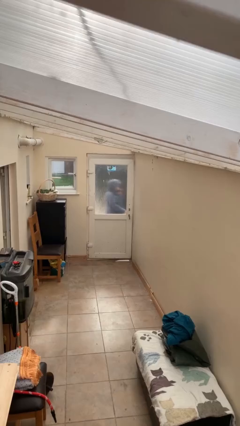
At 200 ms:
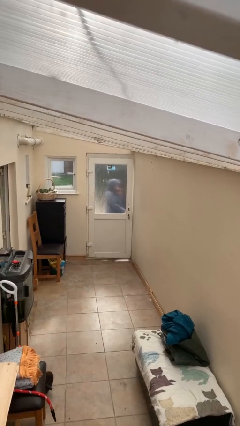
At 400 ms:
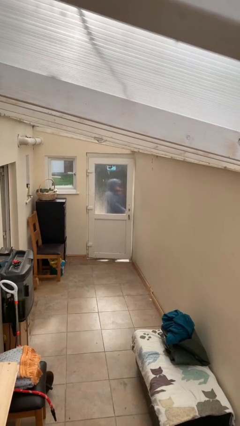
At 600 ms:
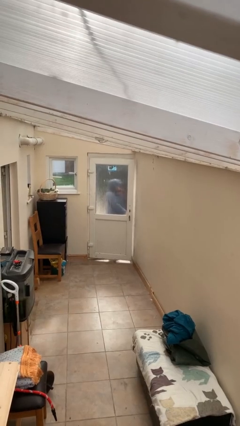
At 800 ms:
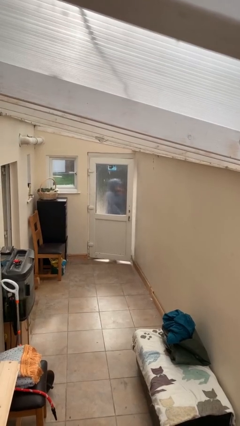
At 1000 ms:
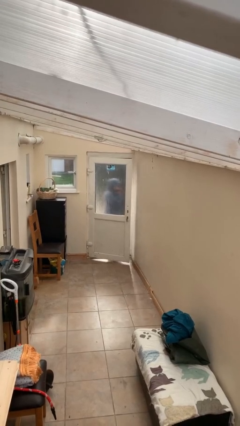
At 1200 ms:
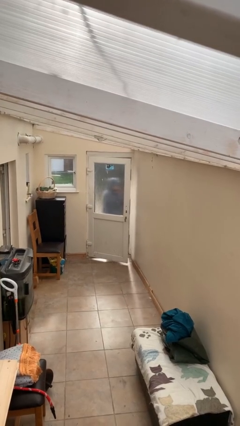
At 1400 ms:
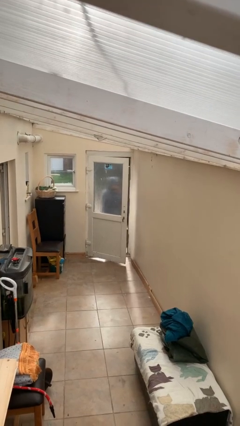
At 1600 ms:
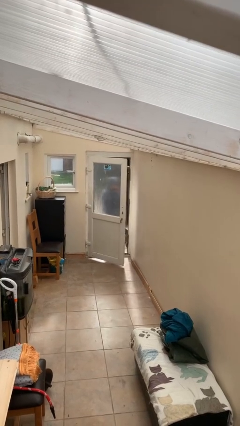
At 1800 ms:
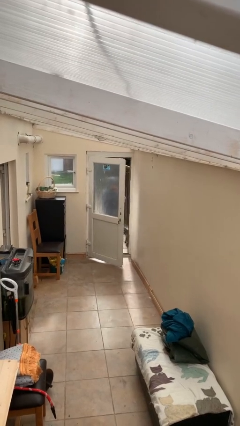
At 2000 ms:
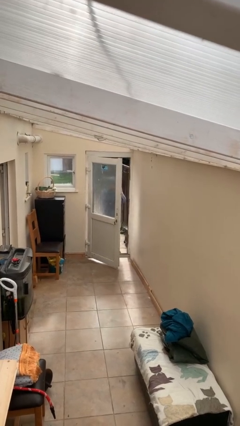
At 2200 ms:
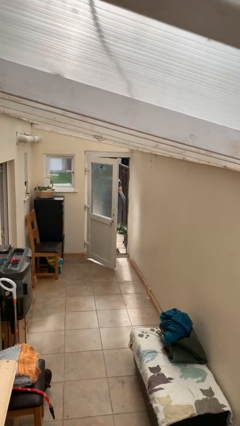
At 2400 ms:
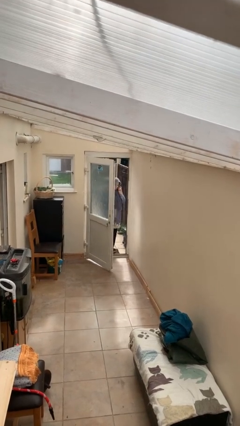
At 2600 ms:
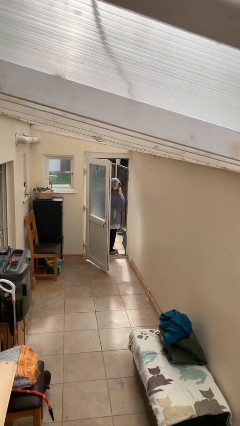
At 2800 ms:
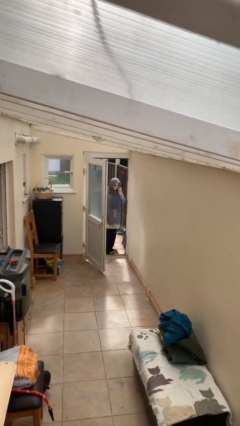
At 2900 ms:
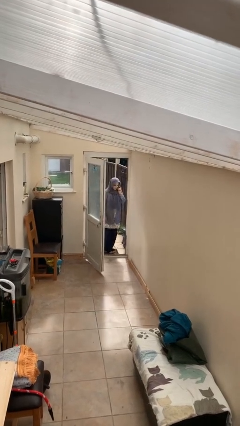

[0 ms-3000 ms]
person opens facility door

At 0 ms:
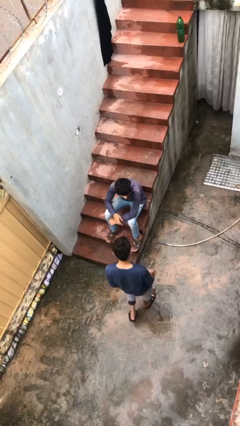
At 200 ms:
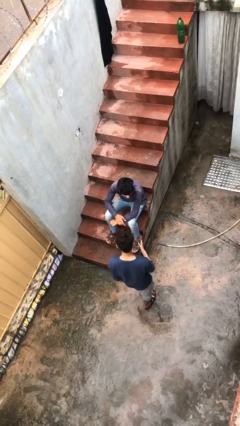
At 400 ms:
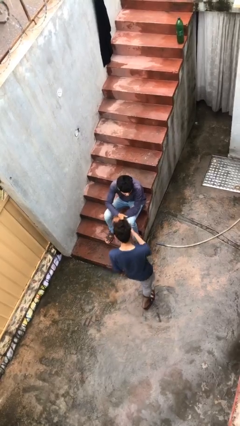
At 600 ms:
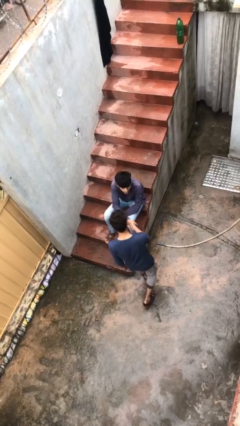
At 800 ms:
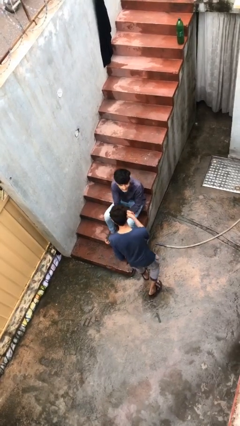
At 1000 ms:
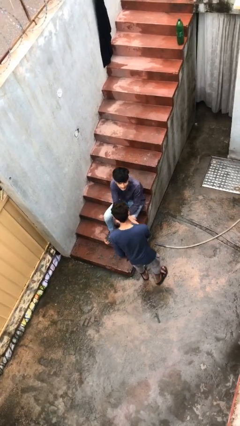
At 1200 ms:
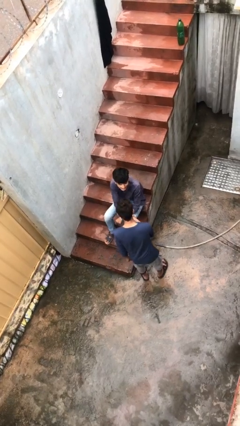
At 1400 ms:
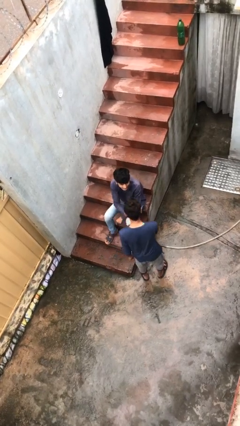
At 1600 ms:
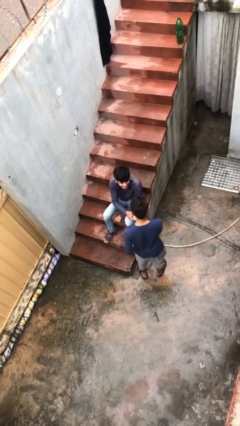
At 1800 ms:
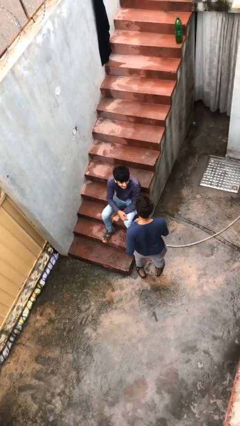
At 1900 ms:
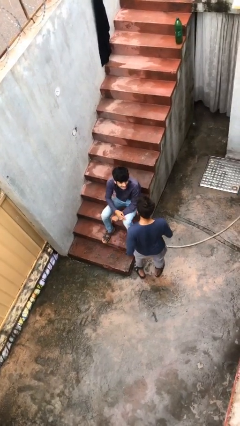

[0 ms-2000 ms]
person shakes hand

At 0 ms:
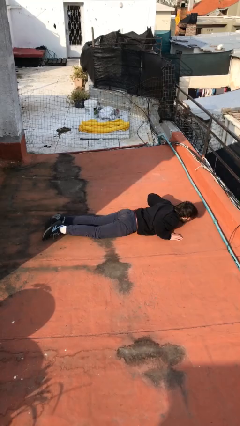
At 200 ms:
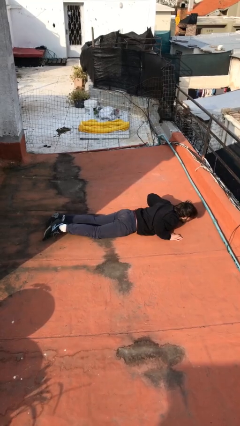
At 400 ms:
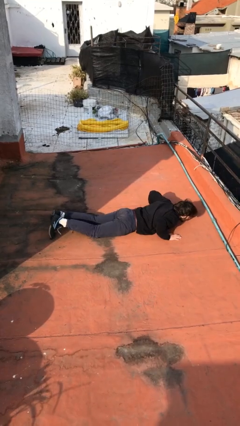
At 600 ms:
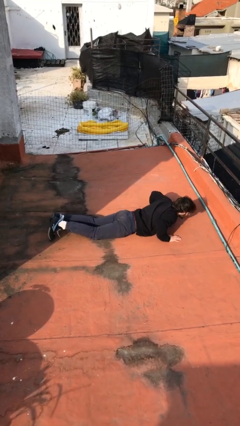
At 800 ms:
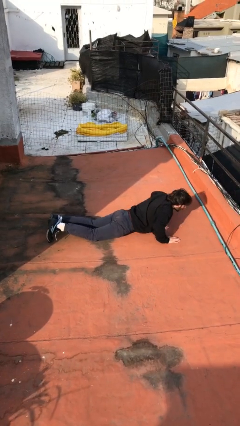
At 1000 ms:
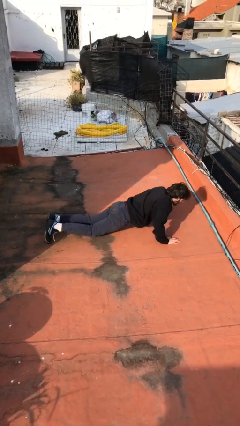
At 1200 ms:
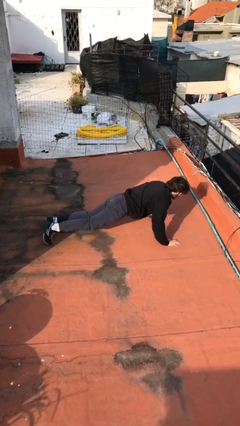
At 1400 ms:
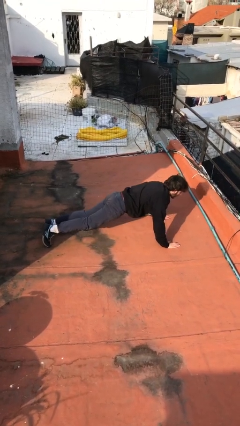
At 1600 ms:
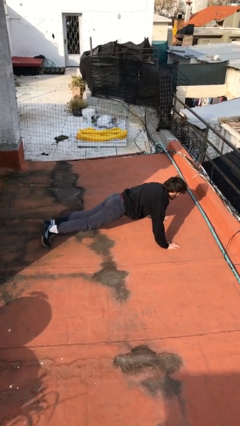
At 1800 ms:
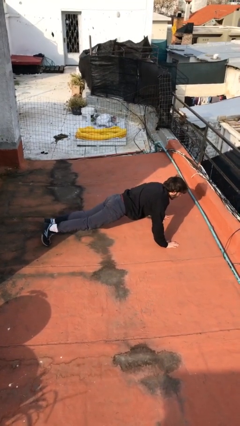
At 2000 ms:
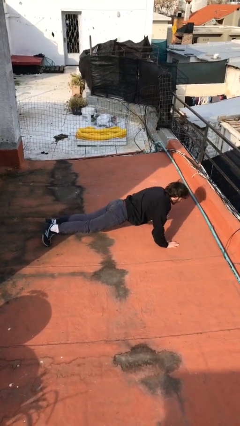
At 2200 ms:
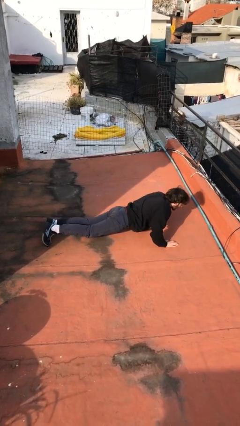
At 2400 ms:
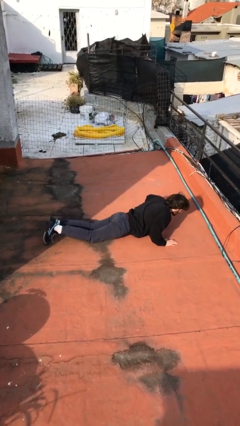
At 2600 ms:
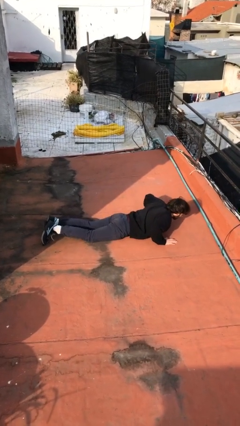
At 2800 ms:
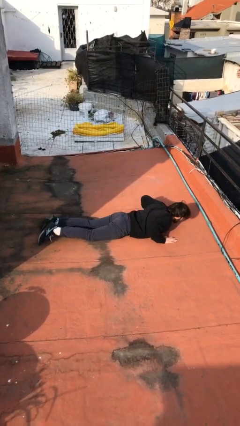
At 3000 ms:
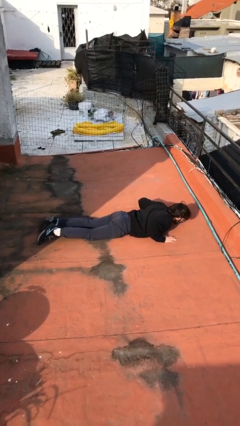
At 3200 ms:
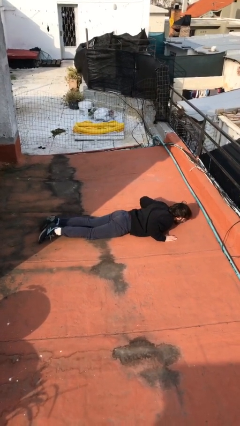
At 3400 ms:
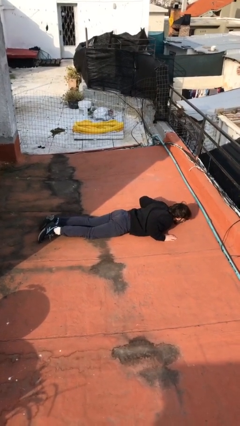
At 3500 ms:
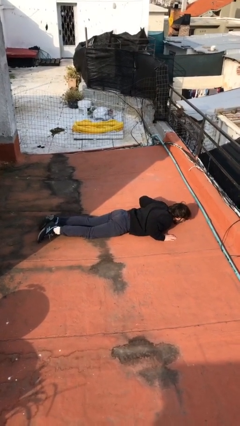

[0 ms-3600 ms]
person exercises with pushup

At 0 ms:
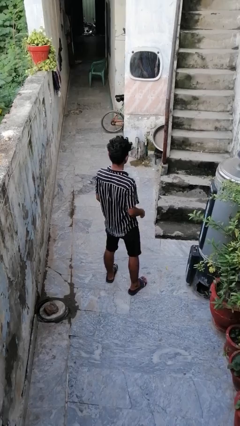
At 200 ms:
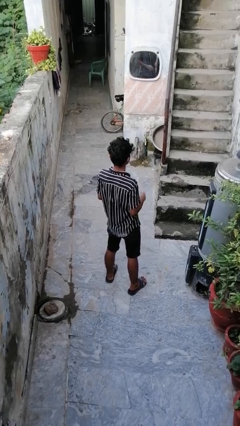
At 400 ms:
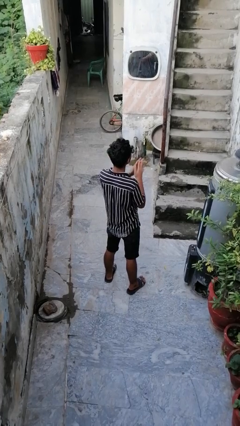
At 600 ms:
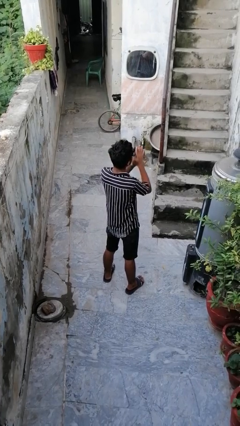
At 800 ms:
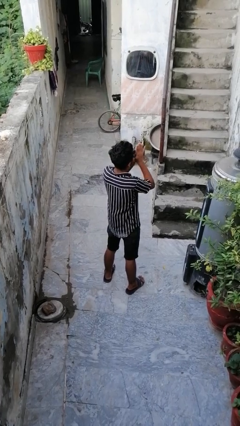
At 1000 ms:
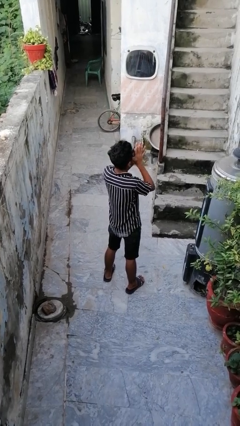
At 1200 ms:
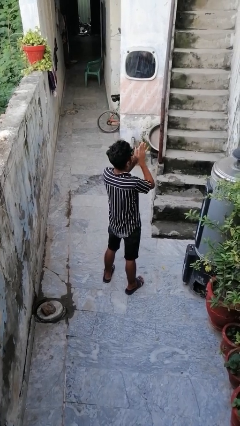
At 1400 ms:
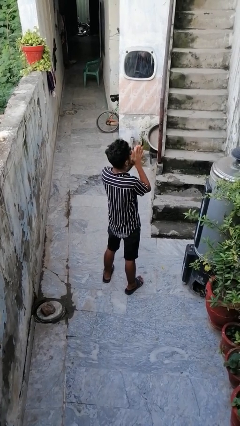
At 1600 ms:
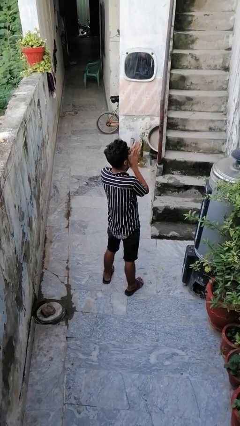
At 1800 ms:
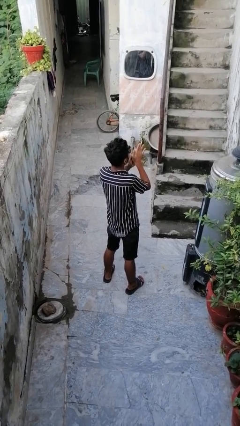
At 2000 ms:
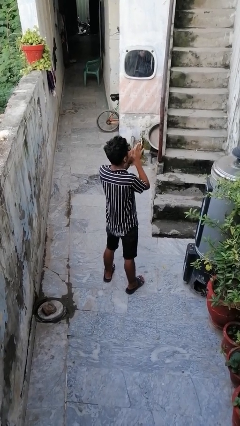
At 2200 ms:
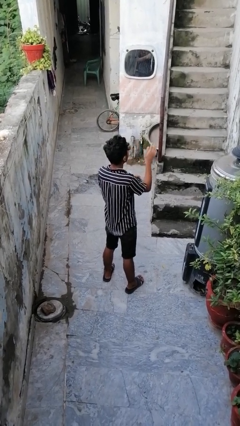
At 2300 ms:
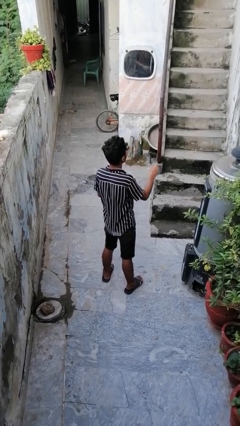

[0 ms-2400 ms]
person blows into hands

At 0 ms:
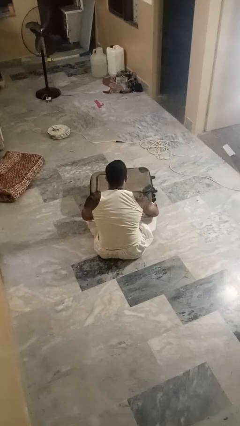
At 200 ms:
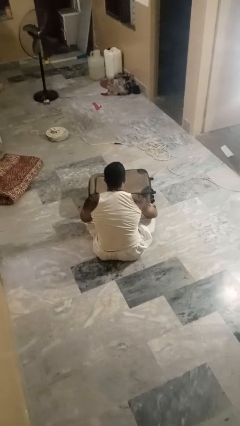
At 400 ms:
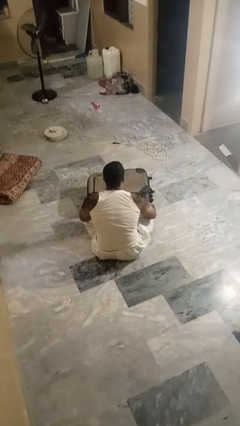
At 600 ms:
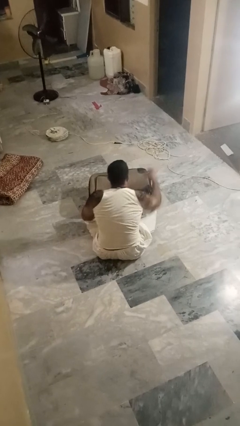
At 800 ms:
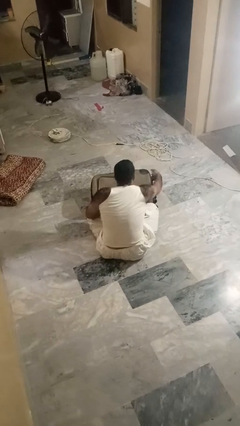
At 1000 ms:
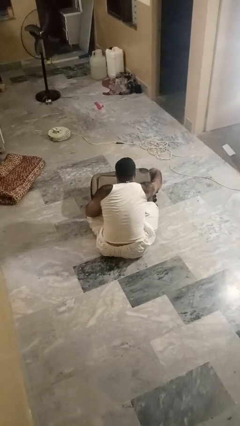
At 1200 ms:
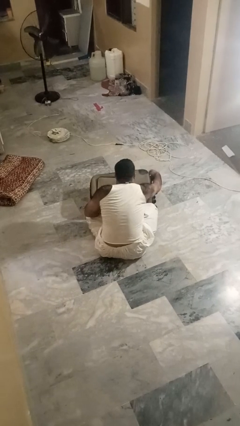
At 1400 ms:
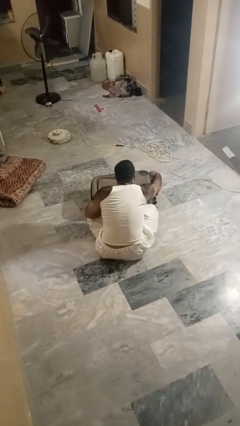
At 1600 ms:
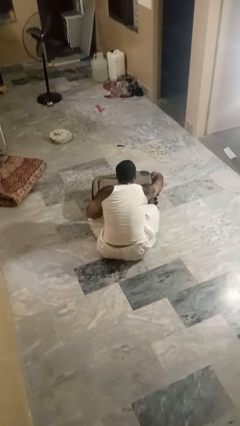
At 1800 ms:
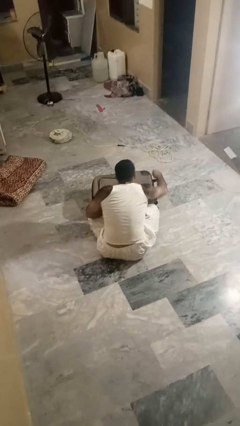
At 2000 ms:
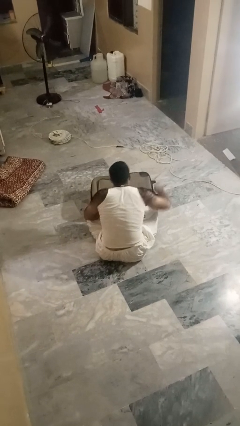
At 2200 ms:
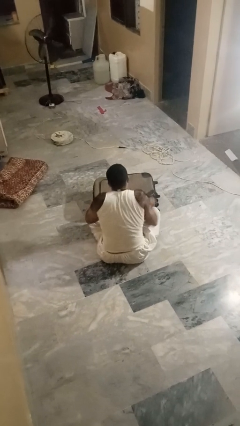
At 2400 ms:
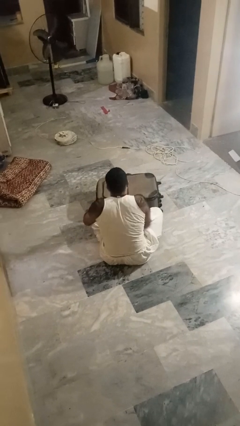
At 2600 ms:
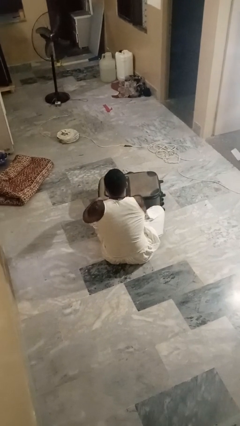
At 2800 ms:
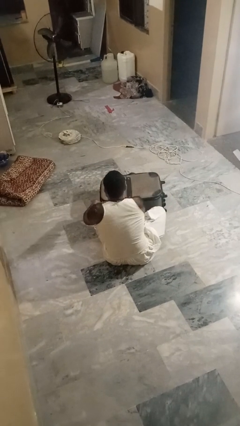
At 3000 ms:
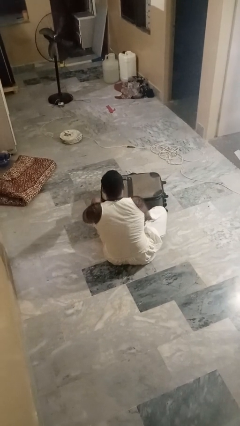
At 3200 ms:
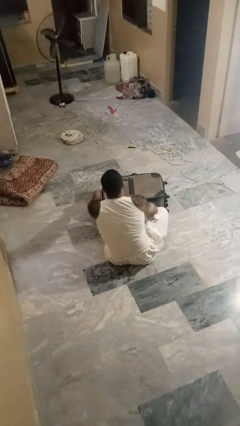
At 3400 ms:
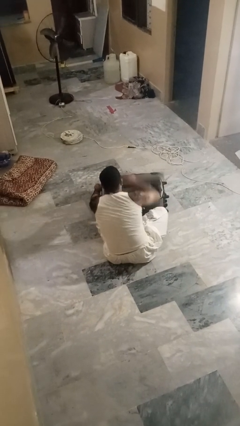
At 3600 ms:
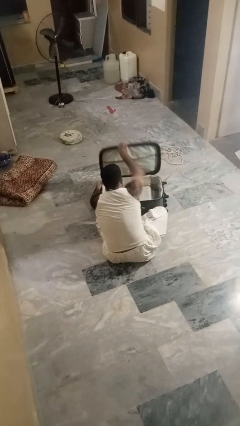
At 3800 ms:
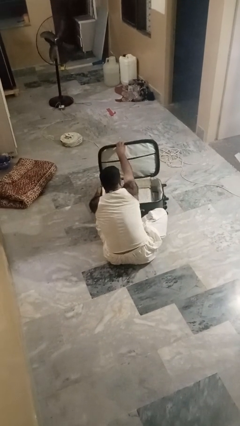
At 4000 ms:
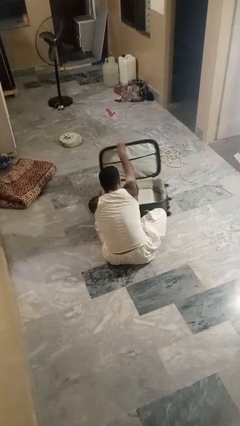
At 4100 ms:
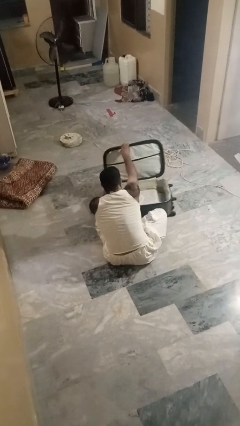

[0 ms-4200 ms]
person opens suitcase

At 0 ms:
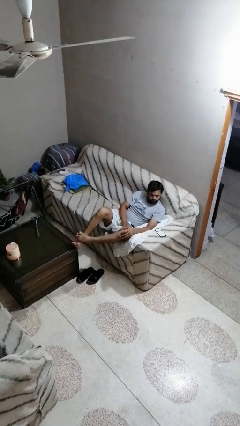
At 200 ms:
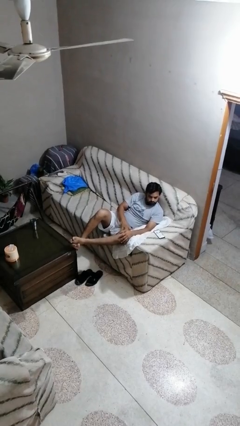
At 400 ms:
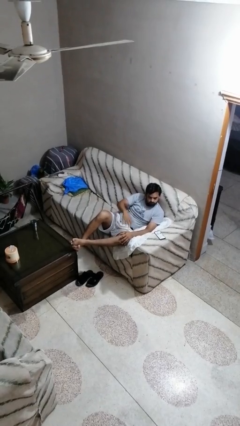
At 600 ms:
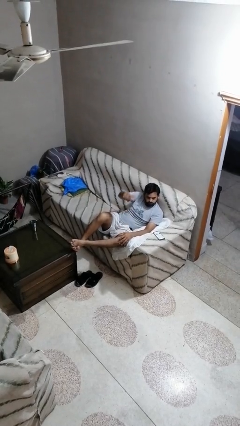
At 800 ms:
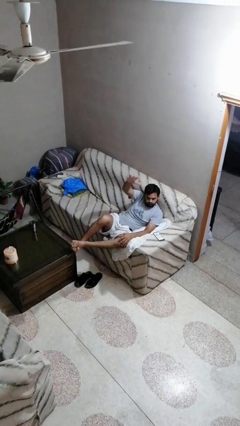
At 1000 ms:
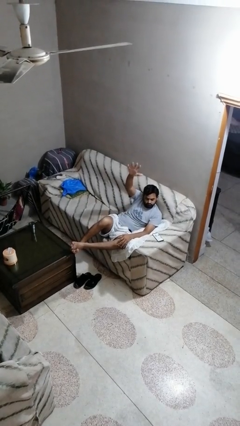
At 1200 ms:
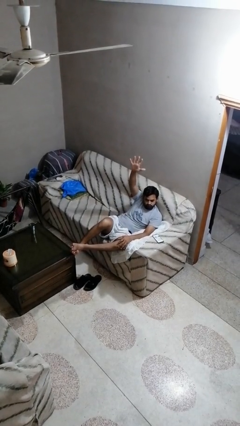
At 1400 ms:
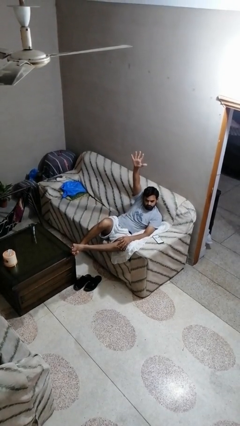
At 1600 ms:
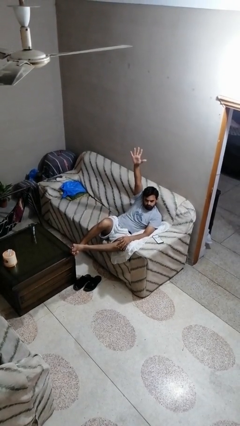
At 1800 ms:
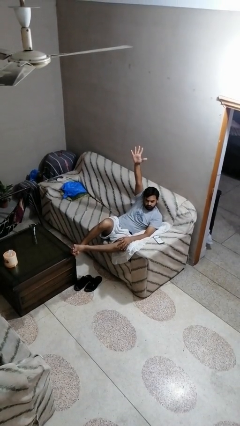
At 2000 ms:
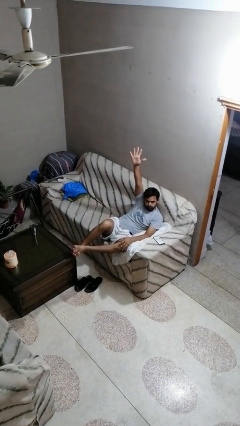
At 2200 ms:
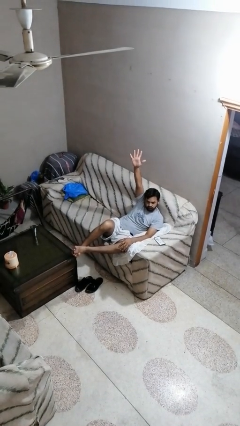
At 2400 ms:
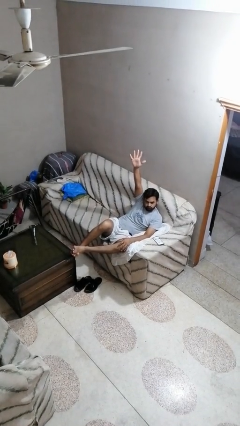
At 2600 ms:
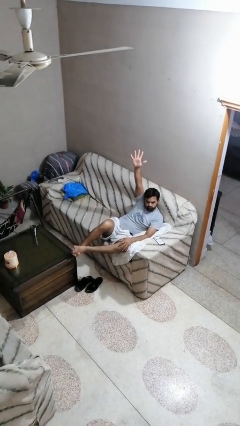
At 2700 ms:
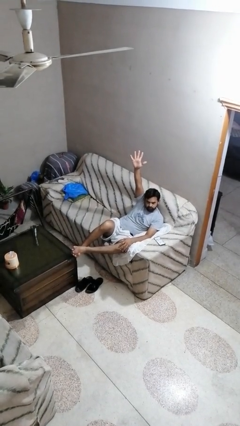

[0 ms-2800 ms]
person gestures number five
